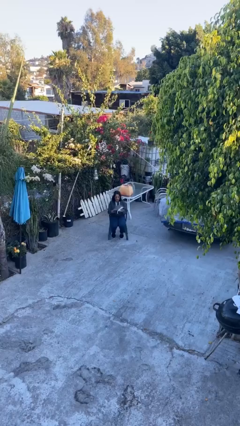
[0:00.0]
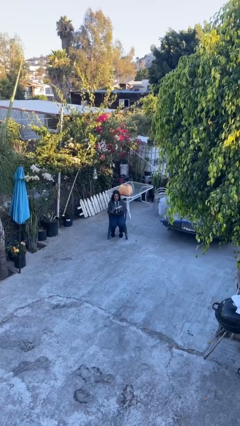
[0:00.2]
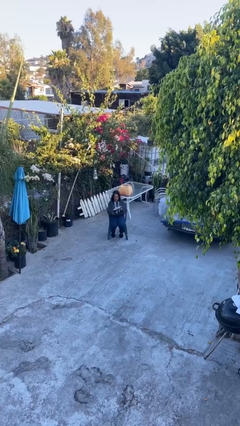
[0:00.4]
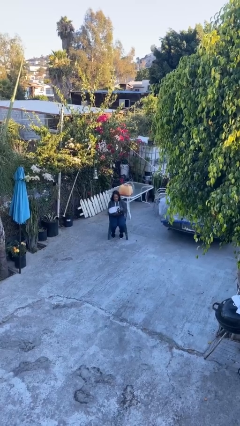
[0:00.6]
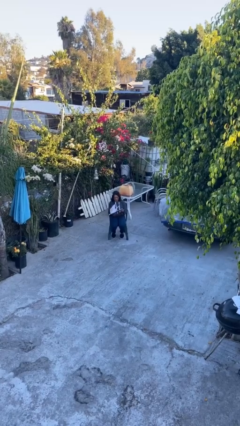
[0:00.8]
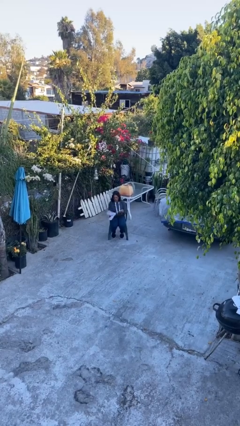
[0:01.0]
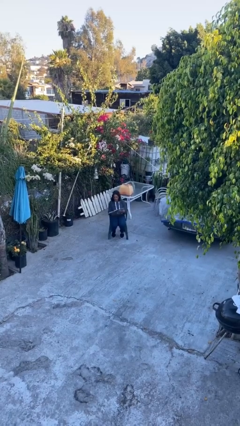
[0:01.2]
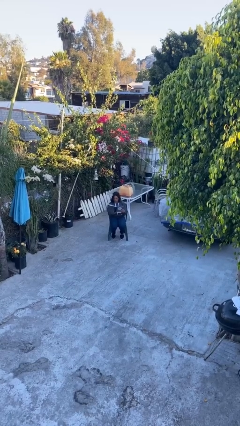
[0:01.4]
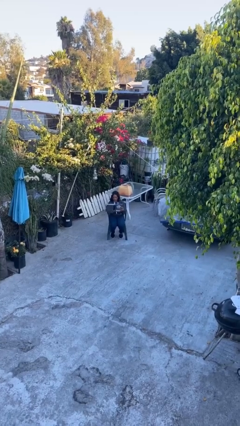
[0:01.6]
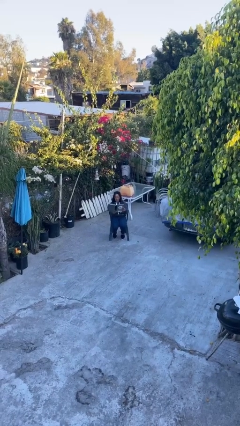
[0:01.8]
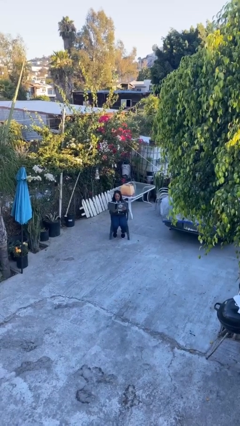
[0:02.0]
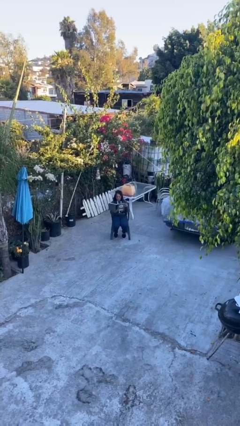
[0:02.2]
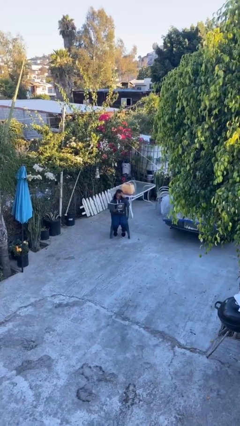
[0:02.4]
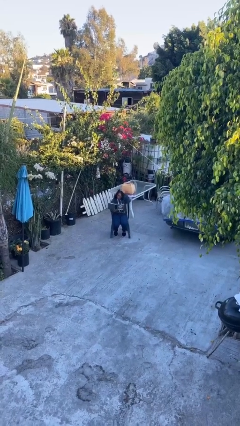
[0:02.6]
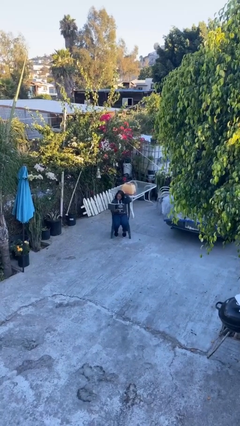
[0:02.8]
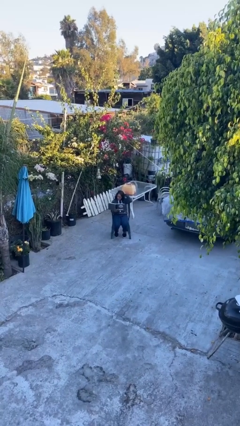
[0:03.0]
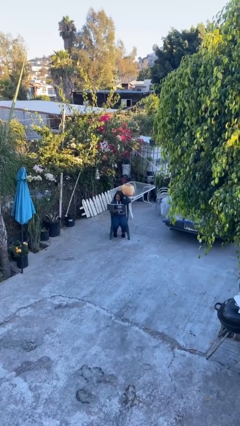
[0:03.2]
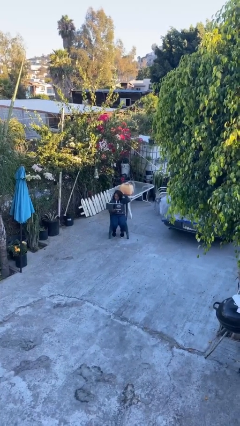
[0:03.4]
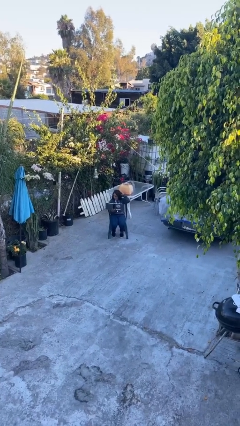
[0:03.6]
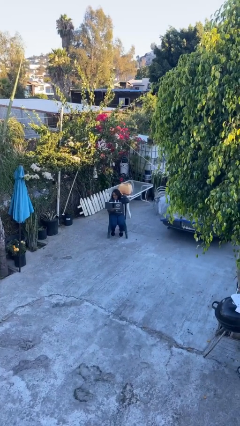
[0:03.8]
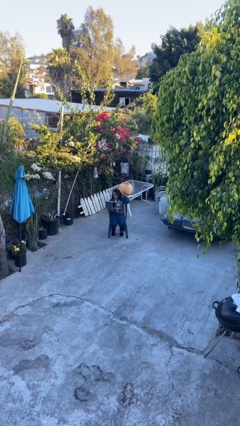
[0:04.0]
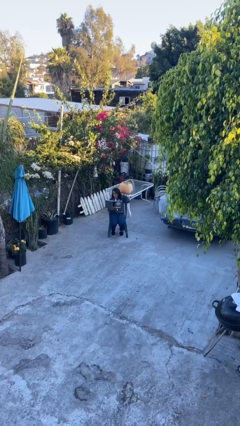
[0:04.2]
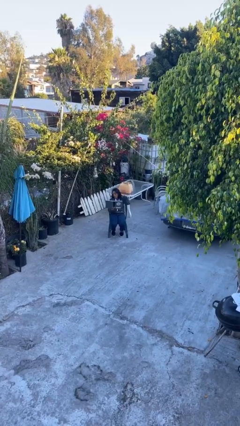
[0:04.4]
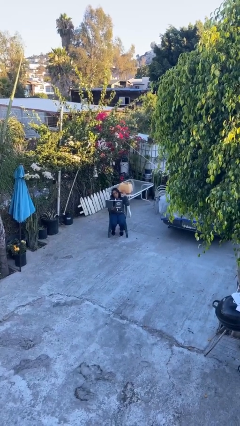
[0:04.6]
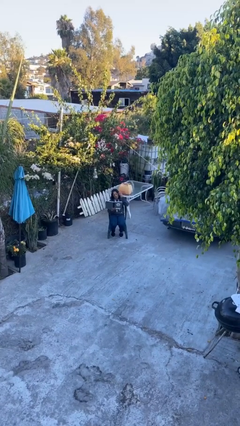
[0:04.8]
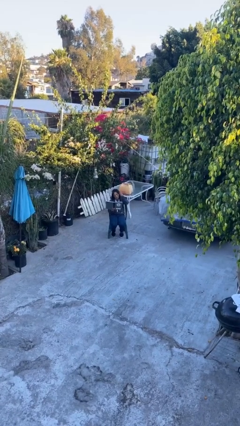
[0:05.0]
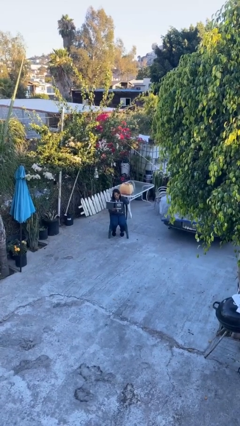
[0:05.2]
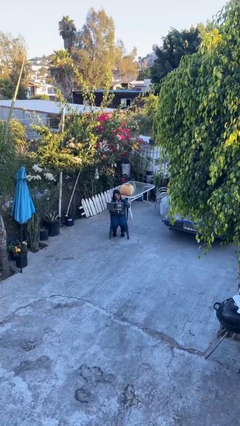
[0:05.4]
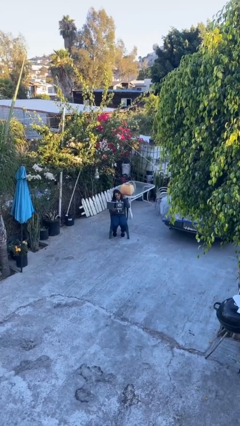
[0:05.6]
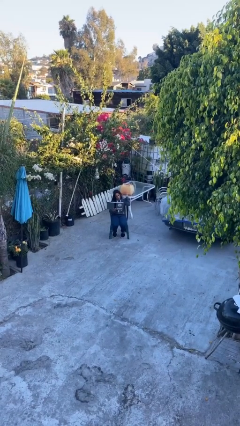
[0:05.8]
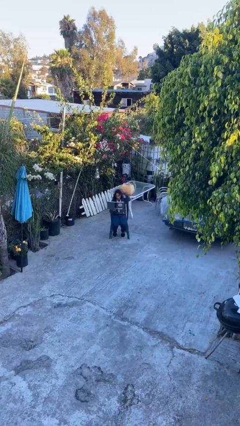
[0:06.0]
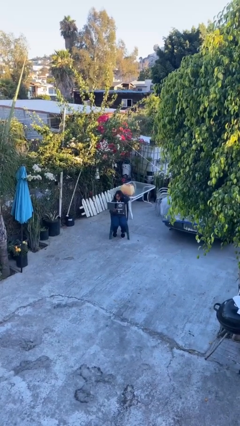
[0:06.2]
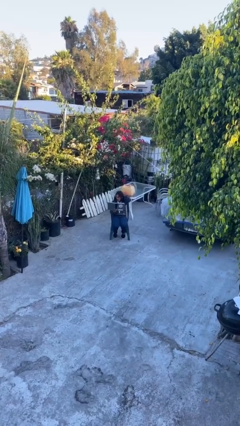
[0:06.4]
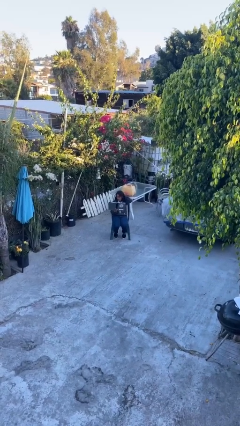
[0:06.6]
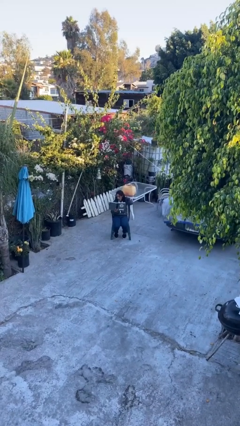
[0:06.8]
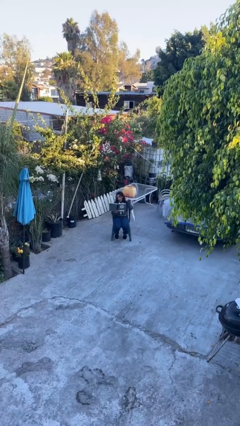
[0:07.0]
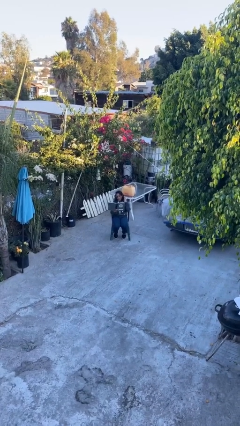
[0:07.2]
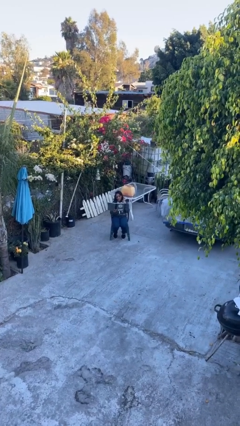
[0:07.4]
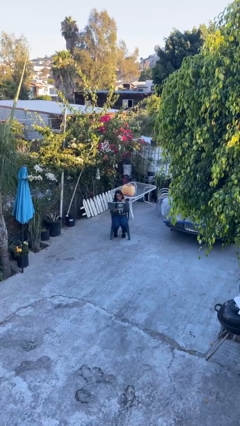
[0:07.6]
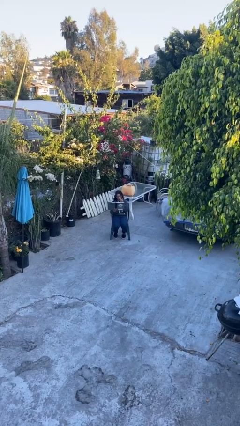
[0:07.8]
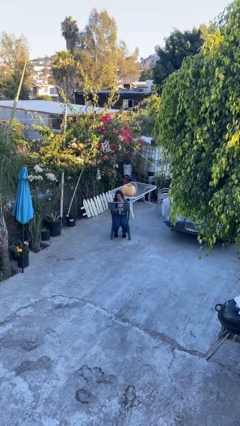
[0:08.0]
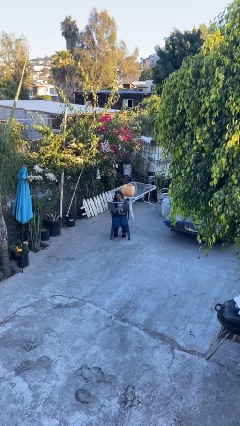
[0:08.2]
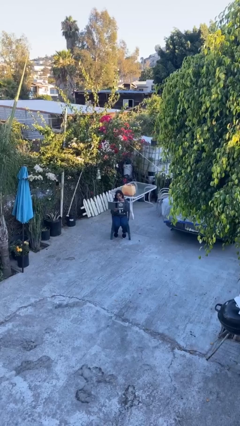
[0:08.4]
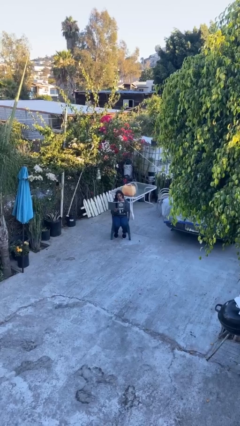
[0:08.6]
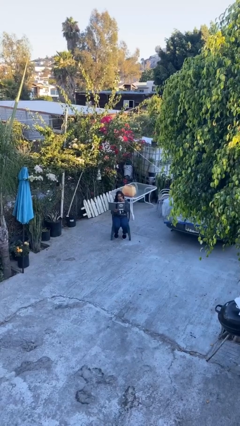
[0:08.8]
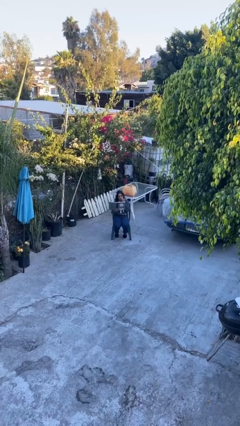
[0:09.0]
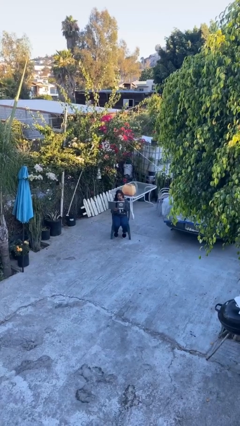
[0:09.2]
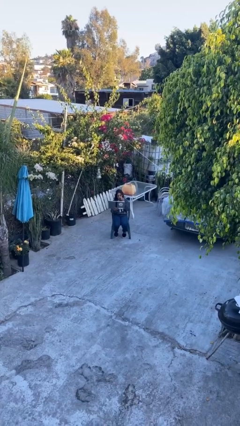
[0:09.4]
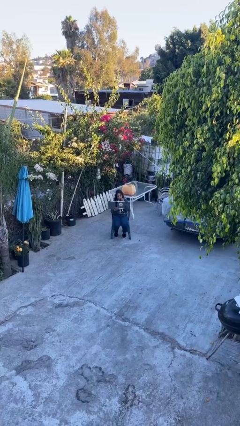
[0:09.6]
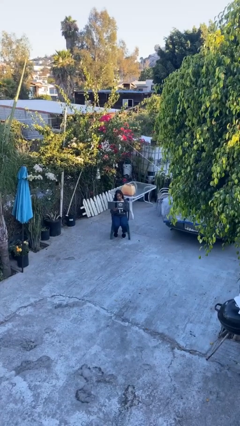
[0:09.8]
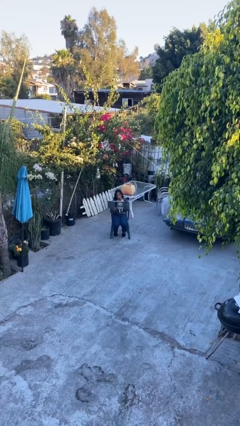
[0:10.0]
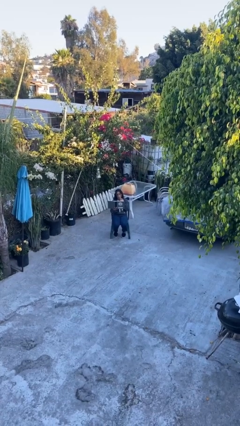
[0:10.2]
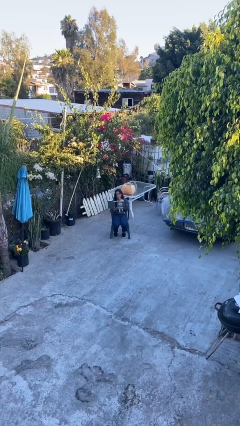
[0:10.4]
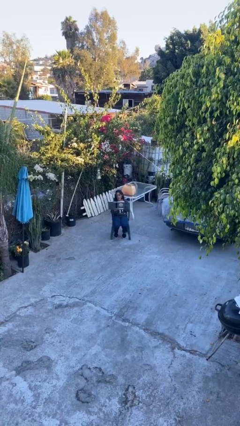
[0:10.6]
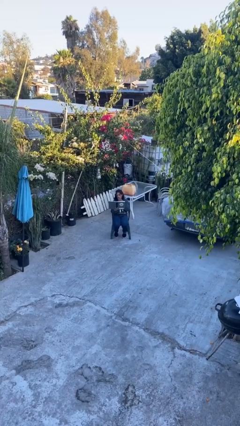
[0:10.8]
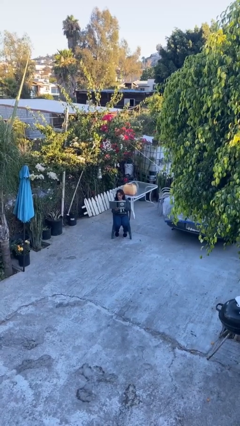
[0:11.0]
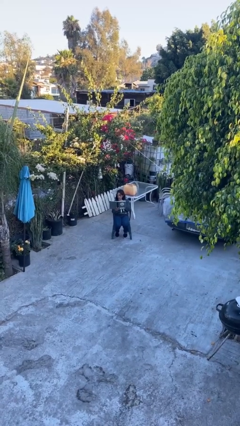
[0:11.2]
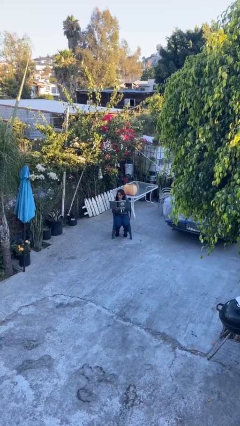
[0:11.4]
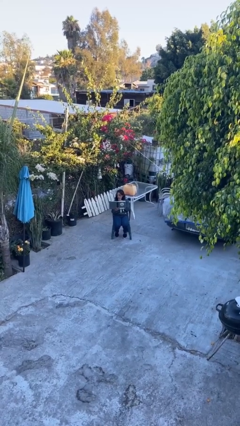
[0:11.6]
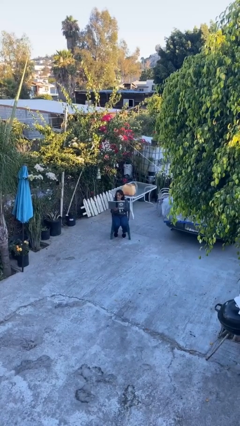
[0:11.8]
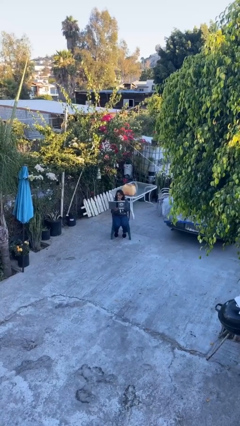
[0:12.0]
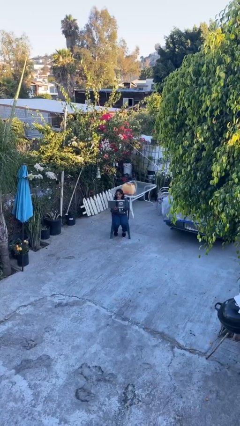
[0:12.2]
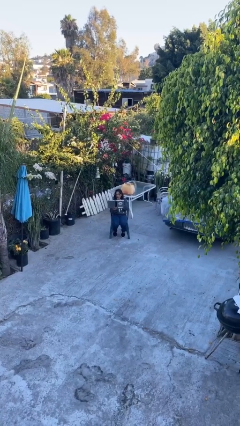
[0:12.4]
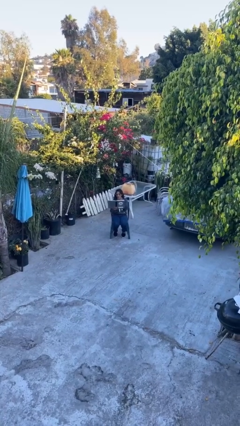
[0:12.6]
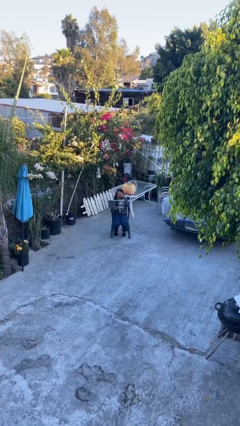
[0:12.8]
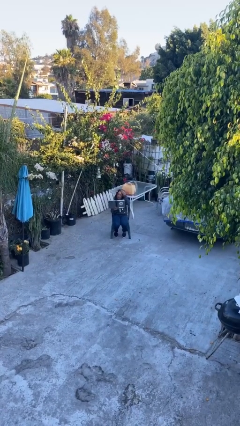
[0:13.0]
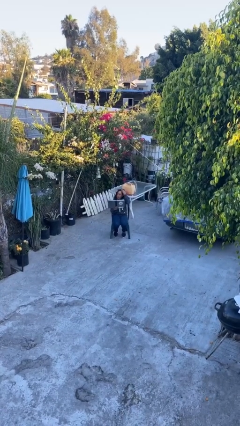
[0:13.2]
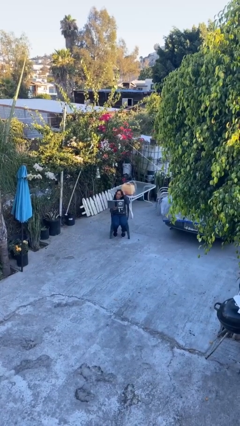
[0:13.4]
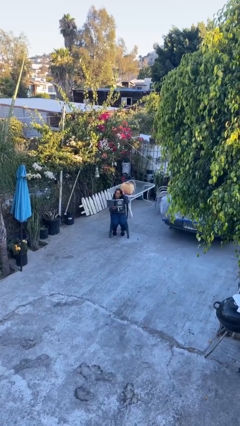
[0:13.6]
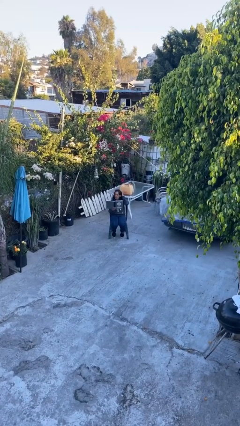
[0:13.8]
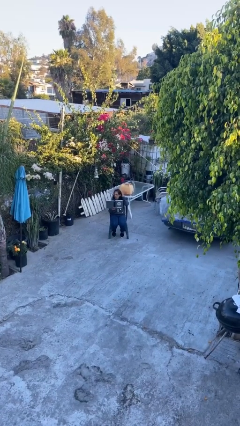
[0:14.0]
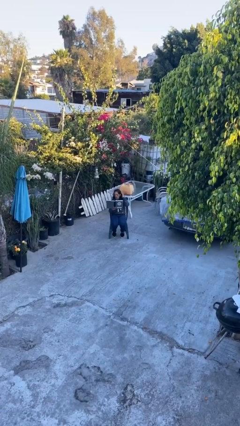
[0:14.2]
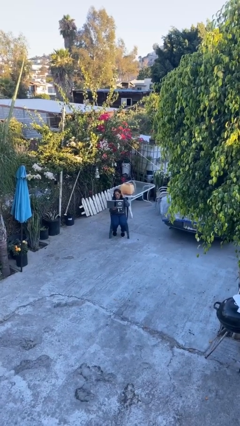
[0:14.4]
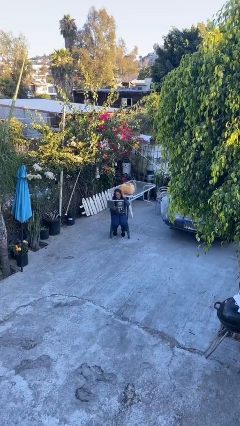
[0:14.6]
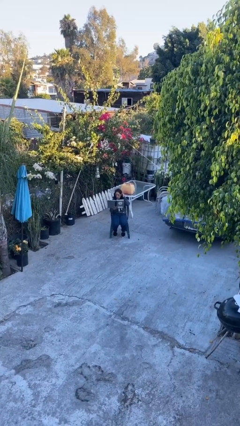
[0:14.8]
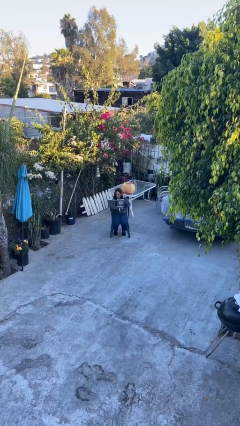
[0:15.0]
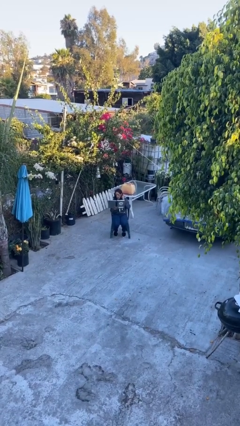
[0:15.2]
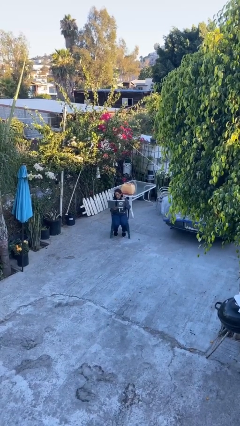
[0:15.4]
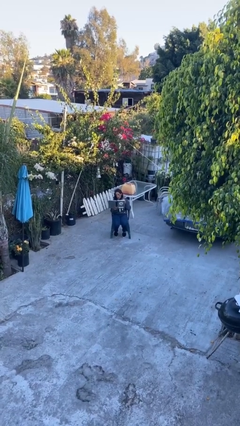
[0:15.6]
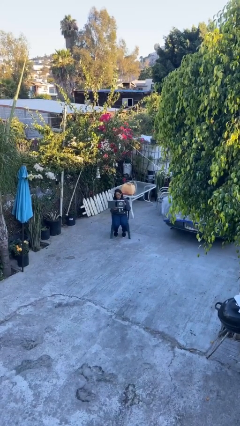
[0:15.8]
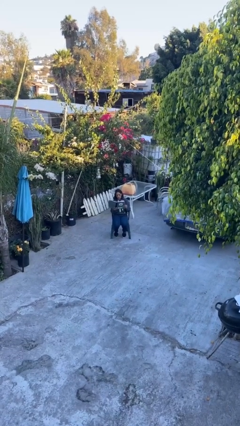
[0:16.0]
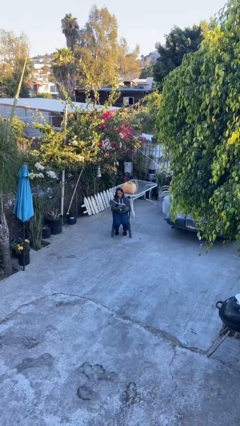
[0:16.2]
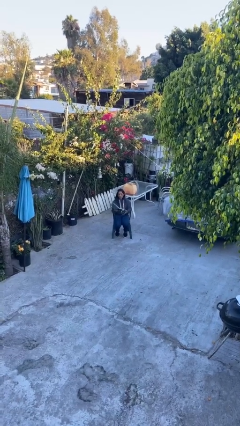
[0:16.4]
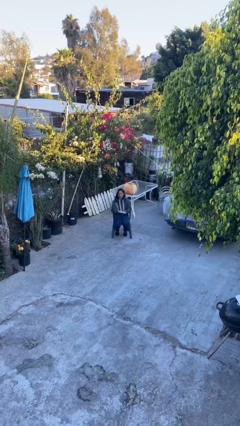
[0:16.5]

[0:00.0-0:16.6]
person reads document

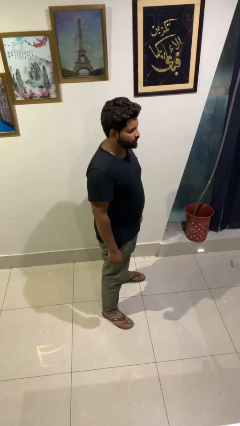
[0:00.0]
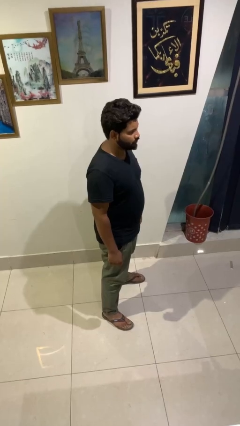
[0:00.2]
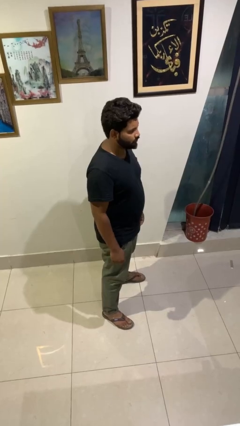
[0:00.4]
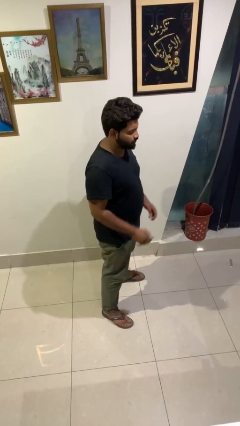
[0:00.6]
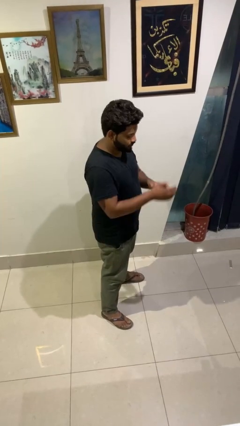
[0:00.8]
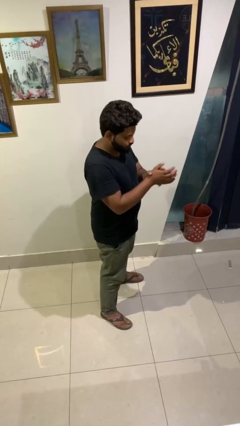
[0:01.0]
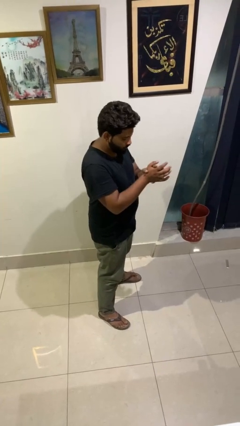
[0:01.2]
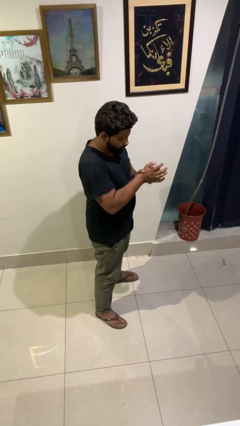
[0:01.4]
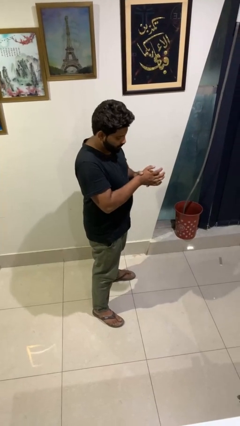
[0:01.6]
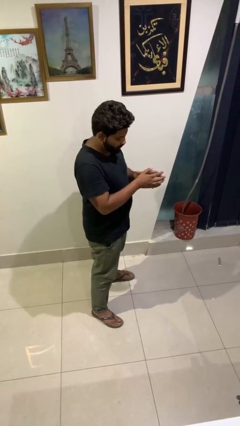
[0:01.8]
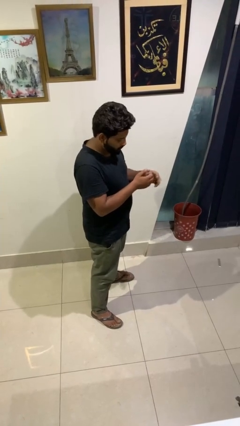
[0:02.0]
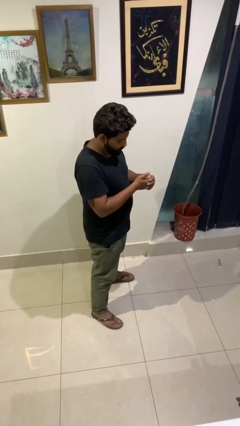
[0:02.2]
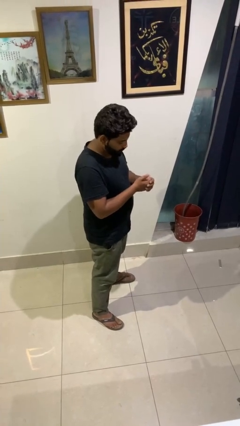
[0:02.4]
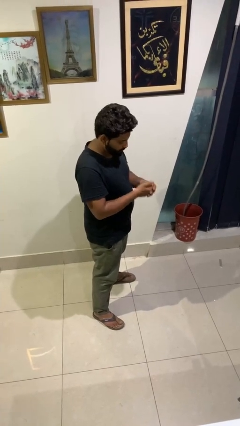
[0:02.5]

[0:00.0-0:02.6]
person cracks knuckles
